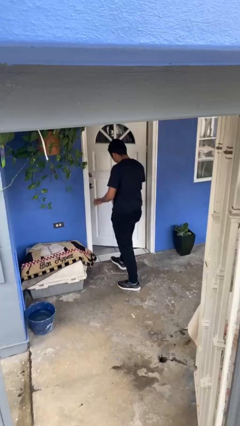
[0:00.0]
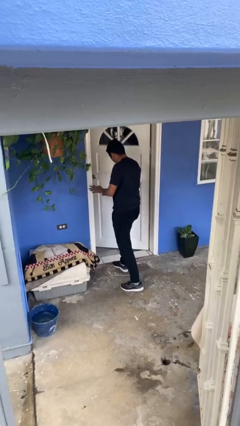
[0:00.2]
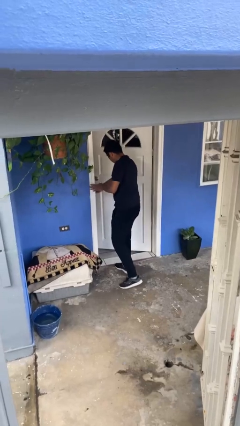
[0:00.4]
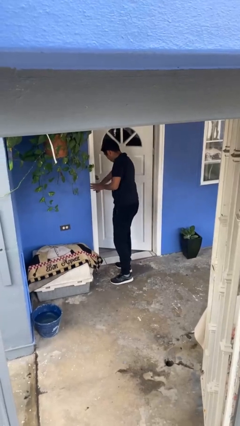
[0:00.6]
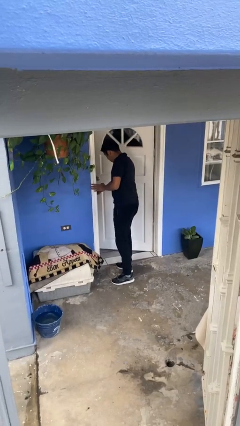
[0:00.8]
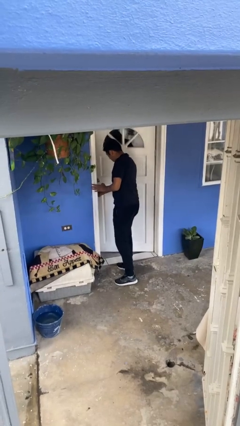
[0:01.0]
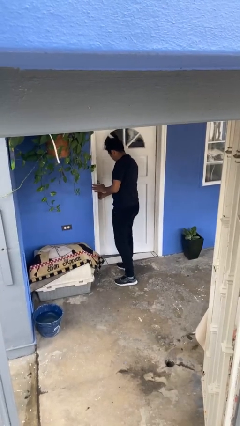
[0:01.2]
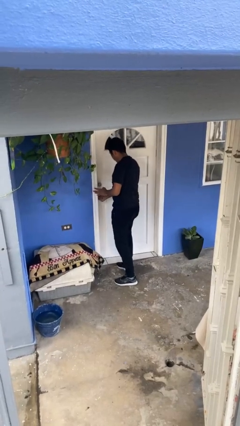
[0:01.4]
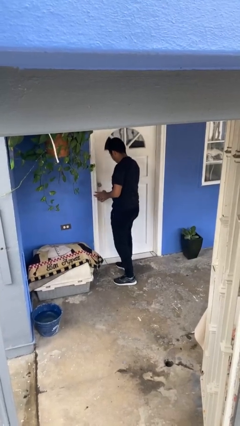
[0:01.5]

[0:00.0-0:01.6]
person closes facility door

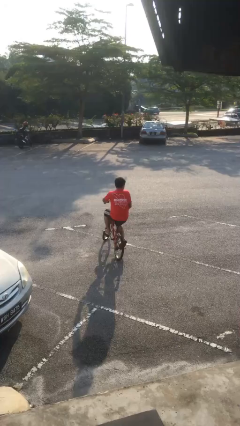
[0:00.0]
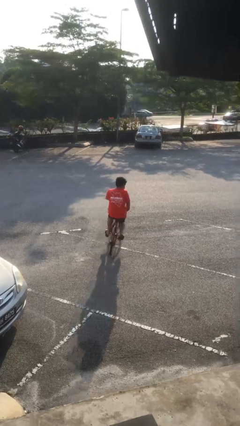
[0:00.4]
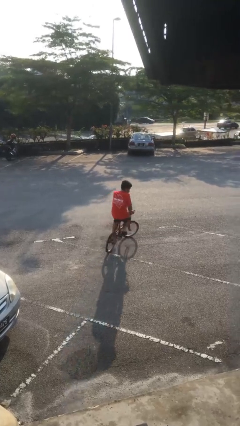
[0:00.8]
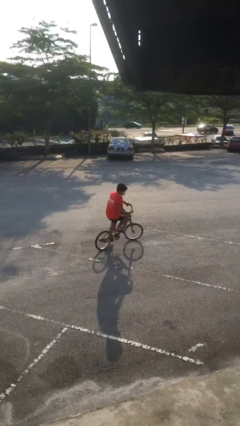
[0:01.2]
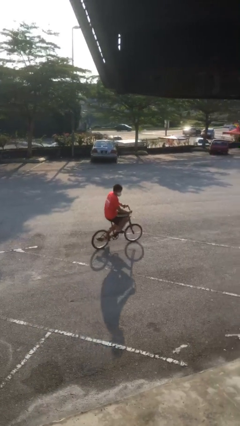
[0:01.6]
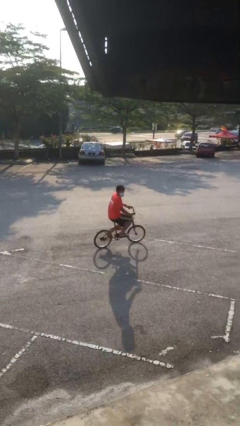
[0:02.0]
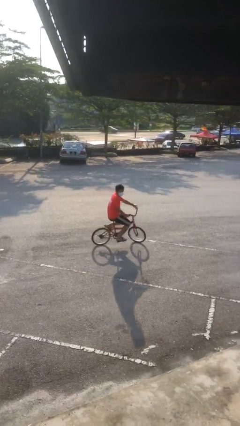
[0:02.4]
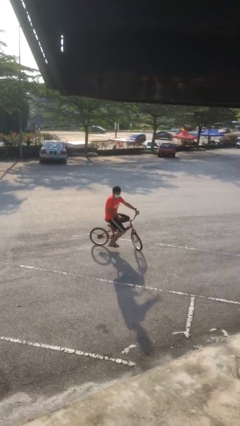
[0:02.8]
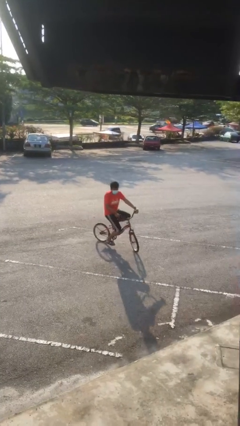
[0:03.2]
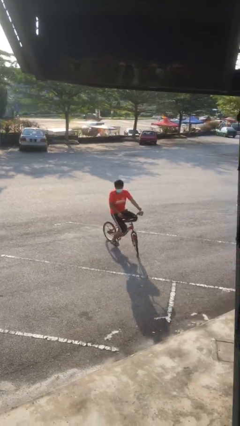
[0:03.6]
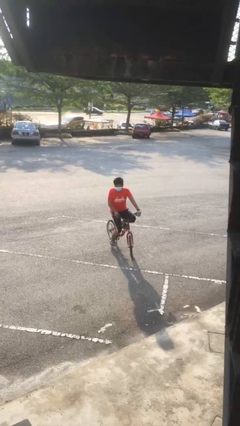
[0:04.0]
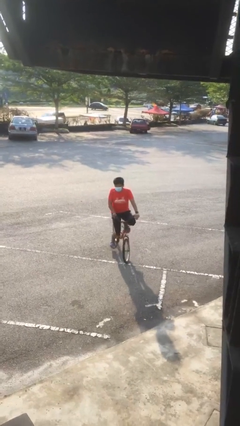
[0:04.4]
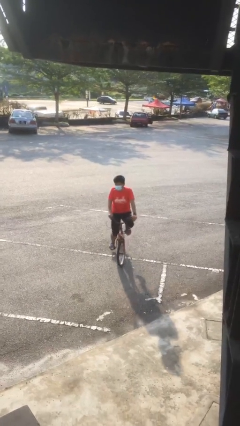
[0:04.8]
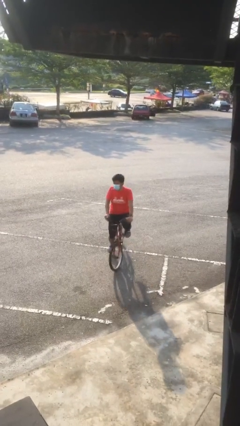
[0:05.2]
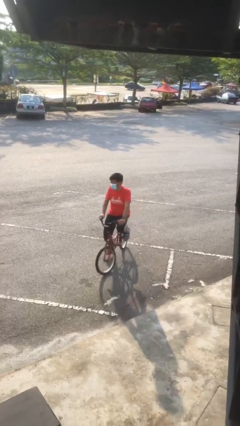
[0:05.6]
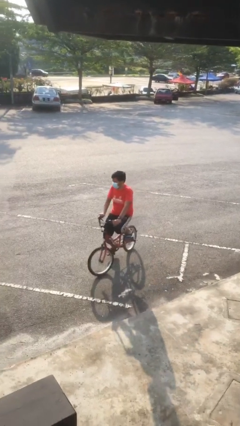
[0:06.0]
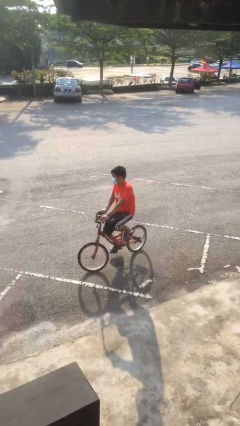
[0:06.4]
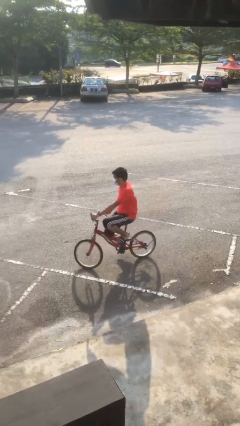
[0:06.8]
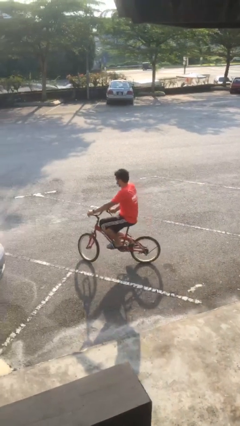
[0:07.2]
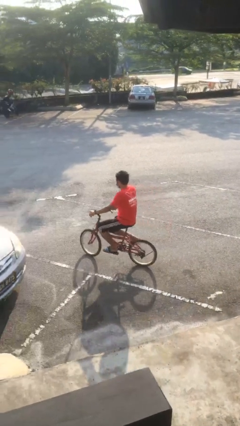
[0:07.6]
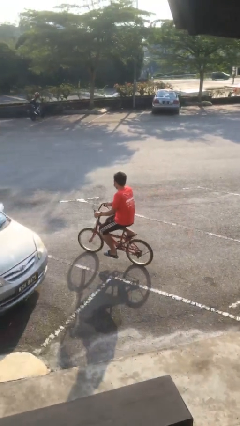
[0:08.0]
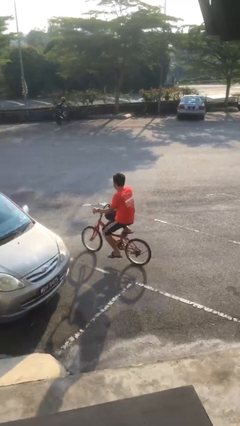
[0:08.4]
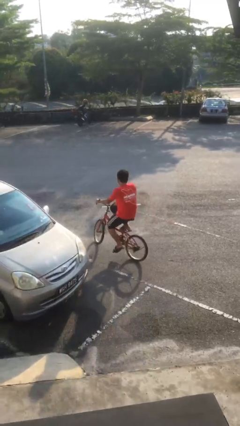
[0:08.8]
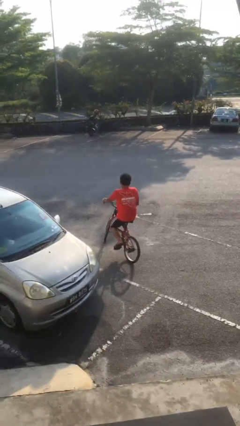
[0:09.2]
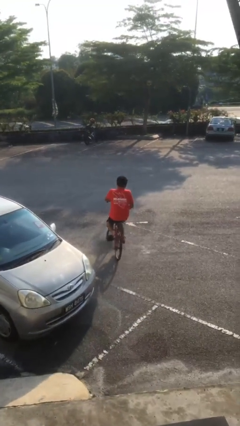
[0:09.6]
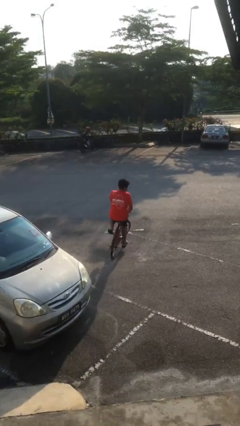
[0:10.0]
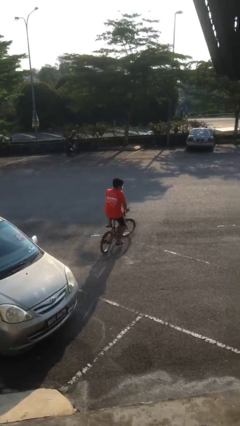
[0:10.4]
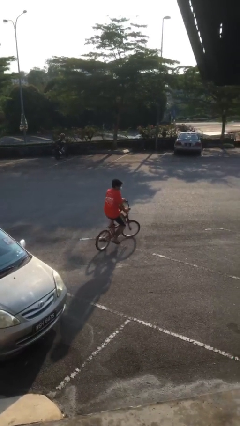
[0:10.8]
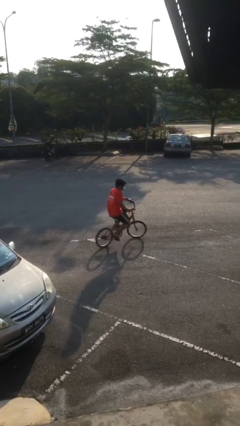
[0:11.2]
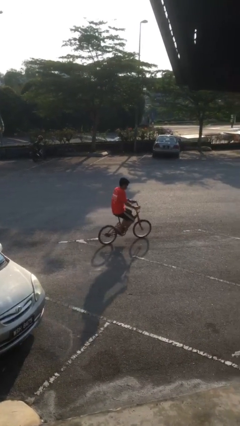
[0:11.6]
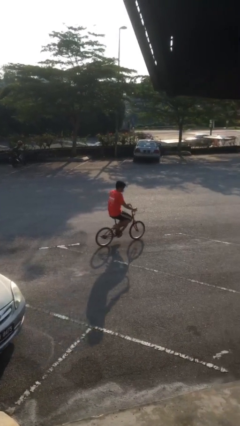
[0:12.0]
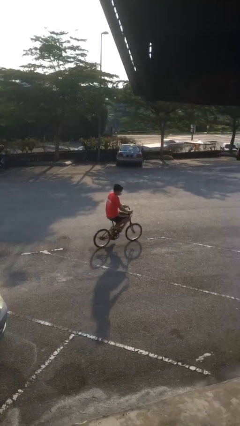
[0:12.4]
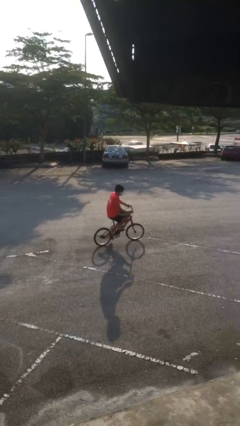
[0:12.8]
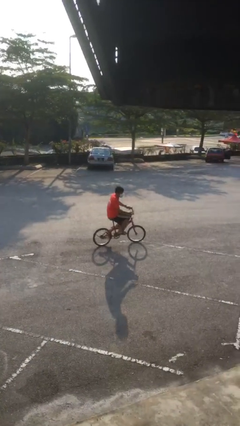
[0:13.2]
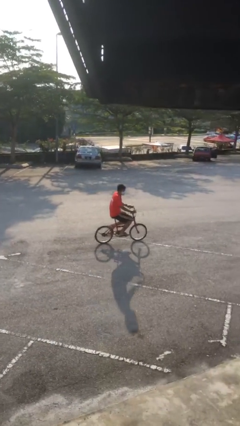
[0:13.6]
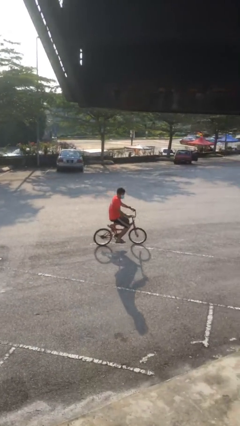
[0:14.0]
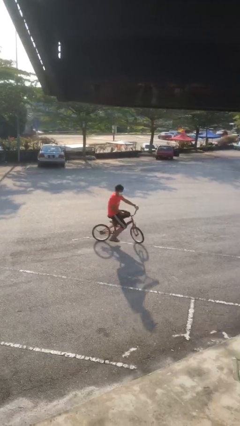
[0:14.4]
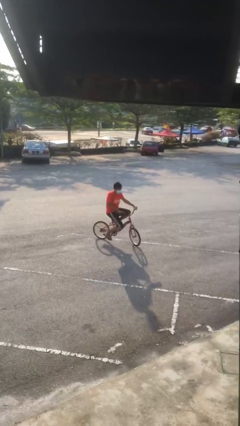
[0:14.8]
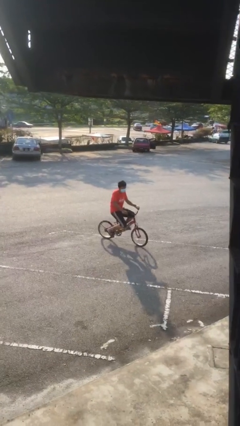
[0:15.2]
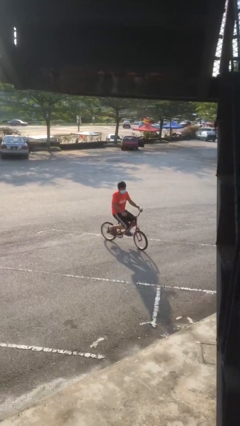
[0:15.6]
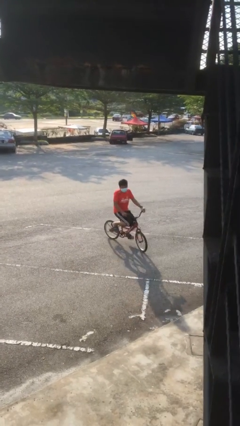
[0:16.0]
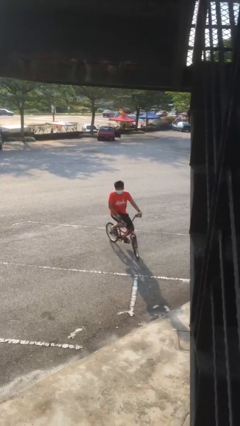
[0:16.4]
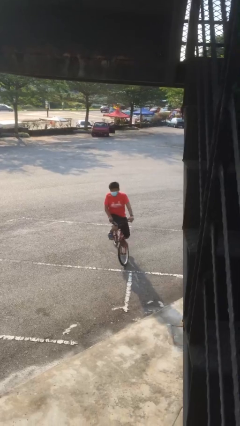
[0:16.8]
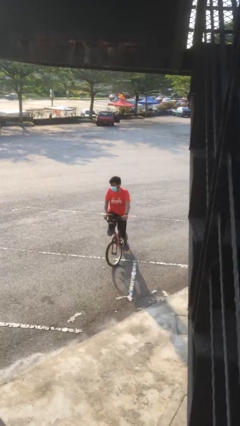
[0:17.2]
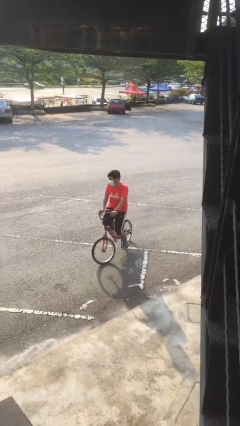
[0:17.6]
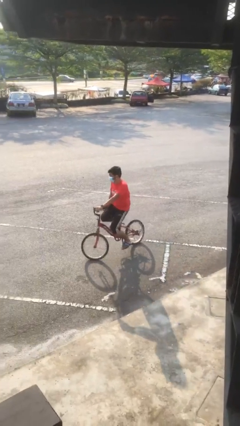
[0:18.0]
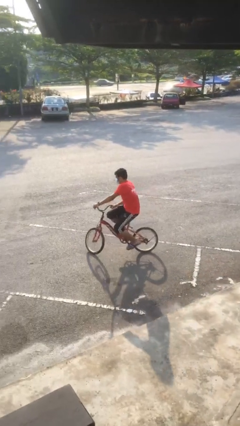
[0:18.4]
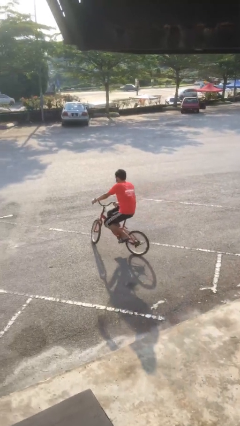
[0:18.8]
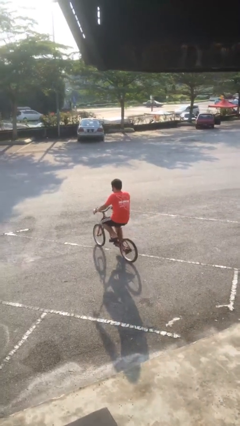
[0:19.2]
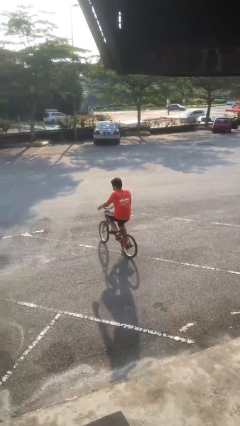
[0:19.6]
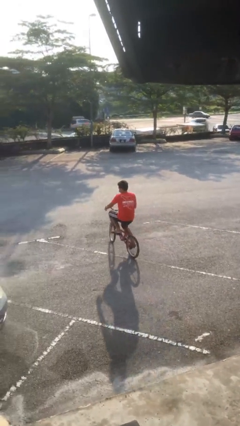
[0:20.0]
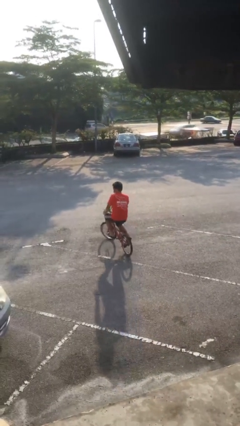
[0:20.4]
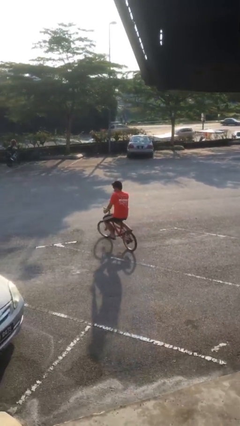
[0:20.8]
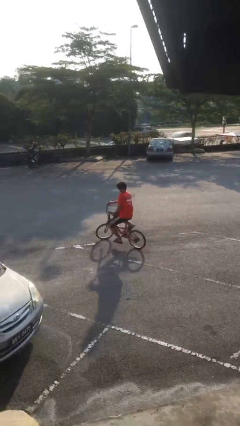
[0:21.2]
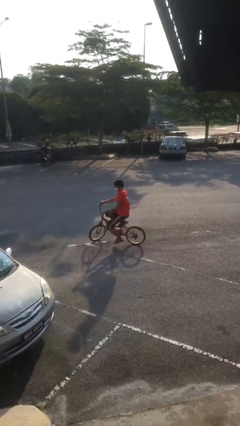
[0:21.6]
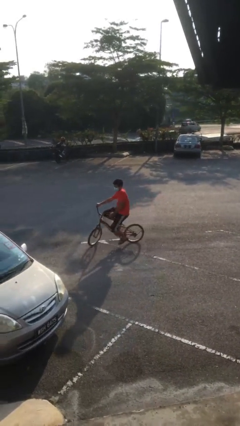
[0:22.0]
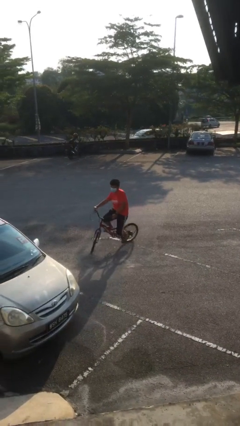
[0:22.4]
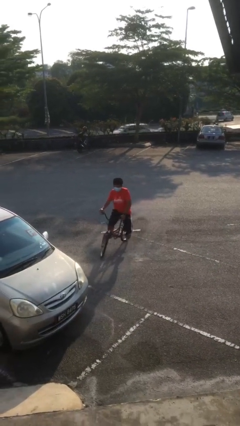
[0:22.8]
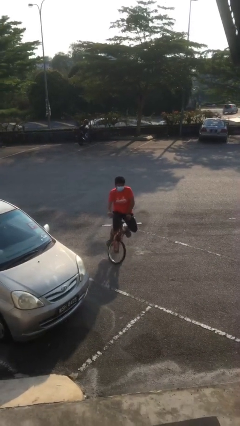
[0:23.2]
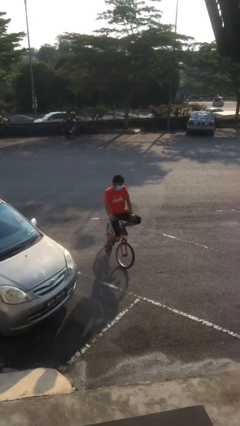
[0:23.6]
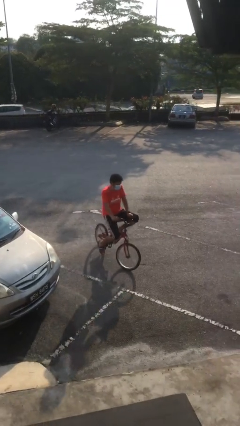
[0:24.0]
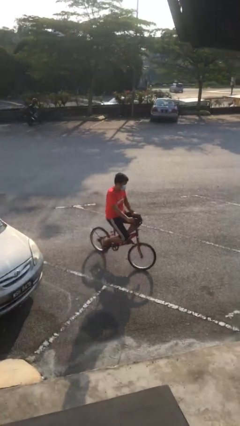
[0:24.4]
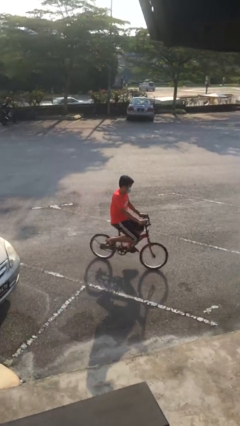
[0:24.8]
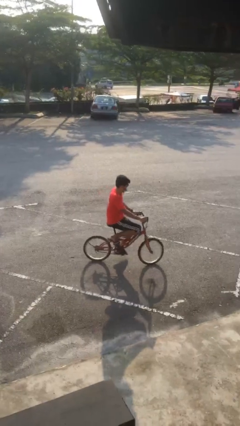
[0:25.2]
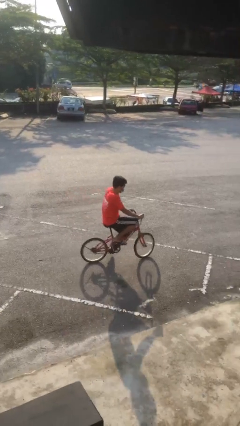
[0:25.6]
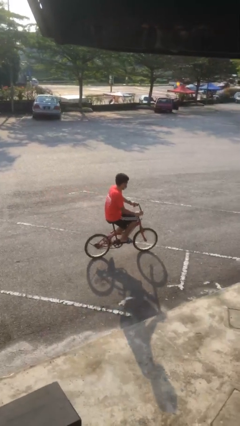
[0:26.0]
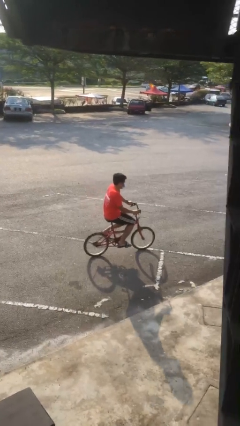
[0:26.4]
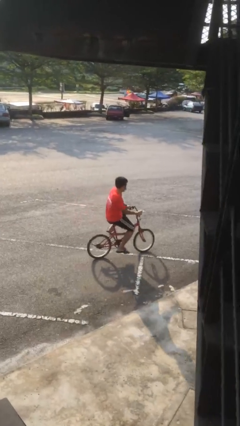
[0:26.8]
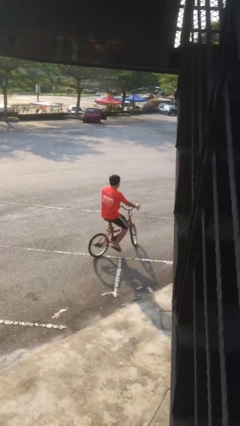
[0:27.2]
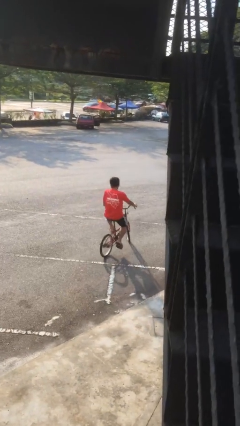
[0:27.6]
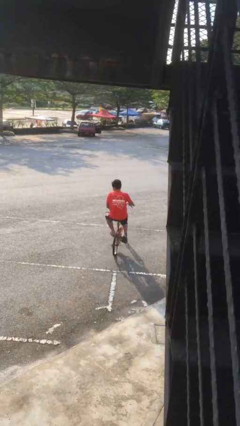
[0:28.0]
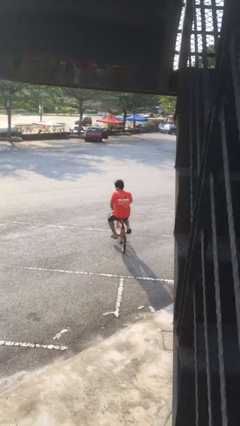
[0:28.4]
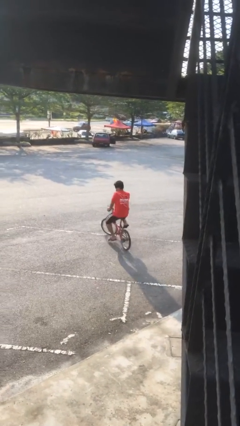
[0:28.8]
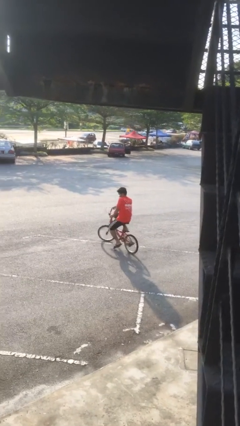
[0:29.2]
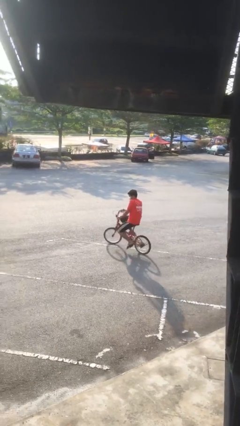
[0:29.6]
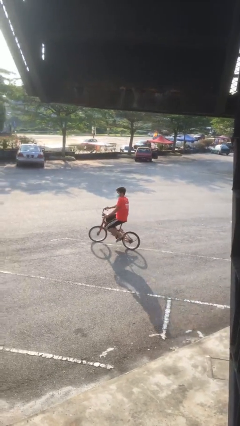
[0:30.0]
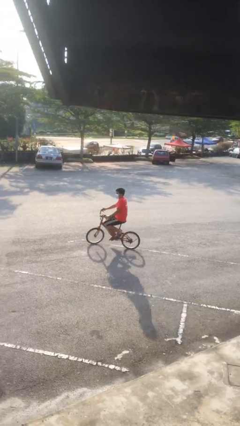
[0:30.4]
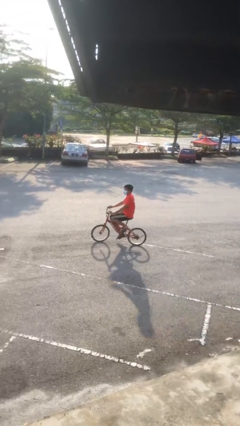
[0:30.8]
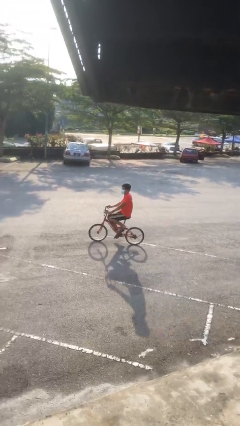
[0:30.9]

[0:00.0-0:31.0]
person rides bicycle

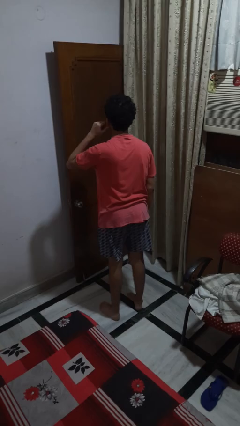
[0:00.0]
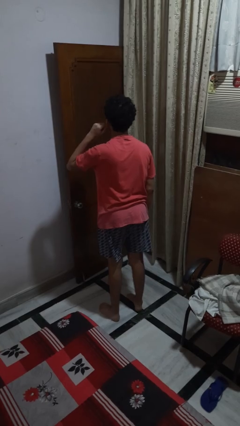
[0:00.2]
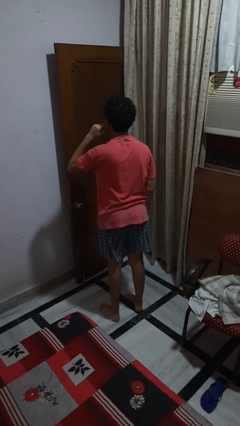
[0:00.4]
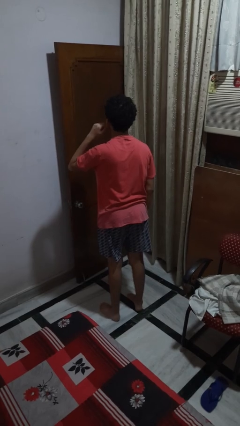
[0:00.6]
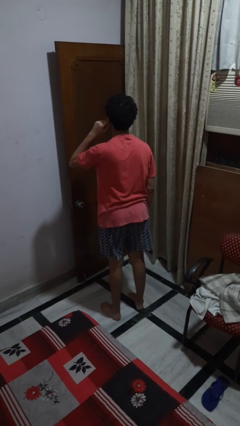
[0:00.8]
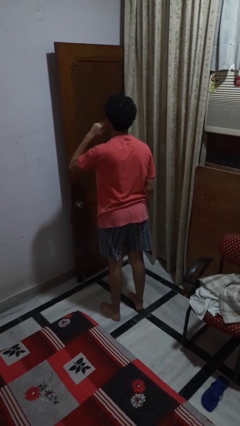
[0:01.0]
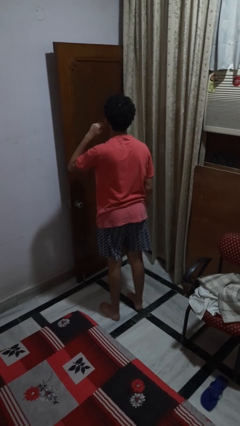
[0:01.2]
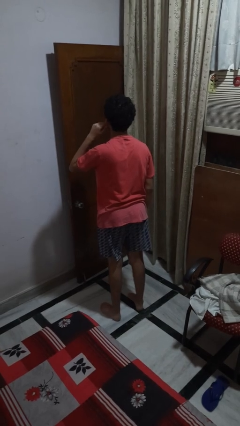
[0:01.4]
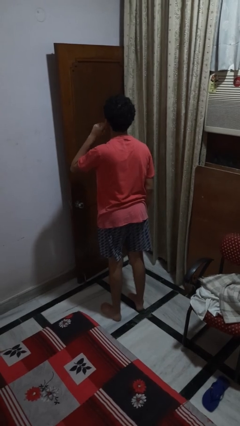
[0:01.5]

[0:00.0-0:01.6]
person touches earlobe
